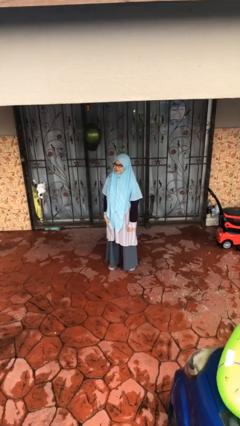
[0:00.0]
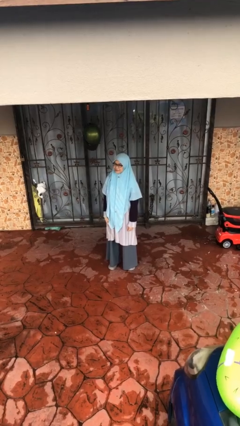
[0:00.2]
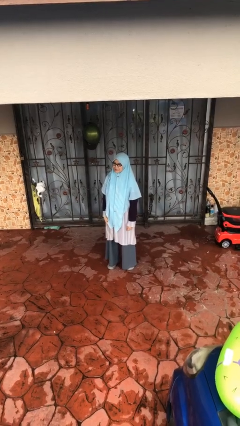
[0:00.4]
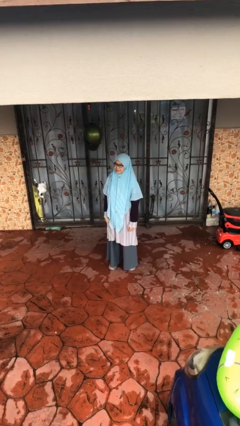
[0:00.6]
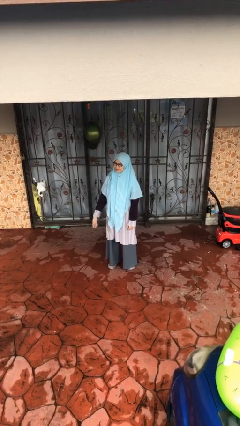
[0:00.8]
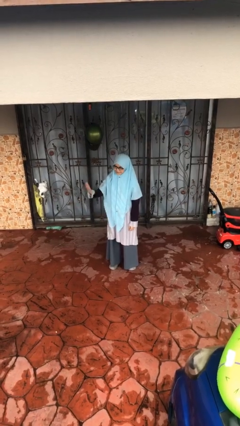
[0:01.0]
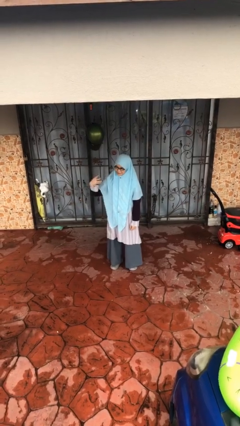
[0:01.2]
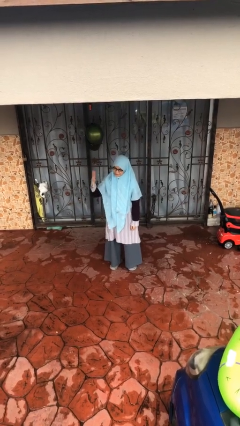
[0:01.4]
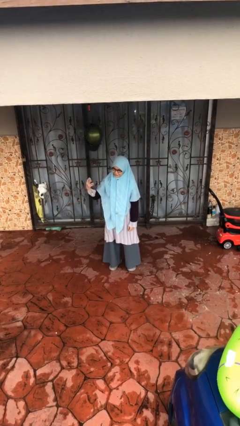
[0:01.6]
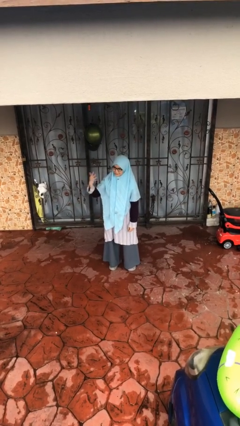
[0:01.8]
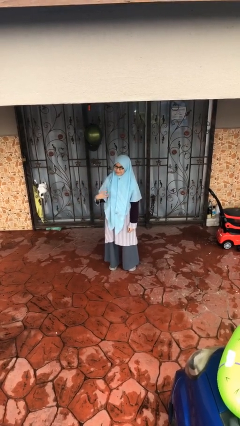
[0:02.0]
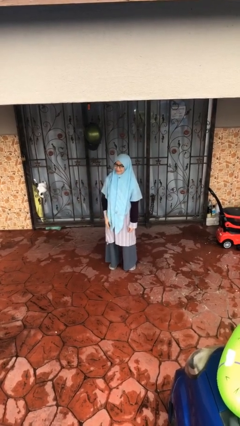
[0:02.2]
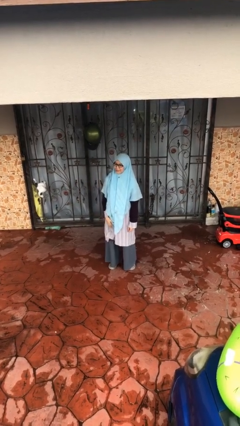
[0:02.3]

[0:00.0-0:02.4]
person gestures come here

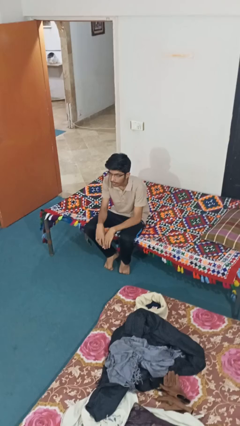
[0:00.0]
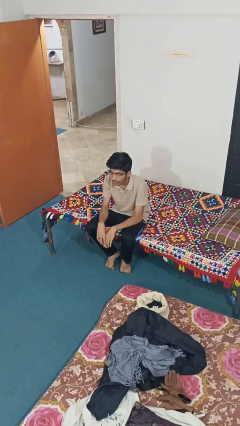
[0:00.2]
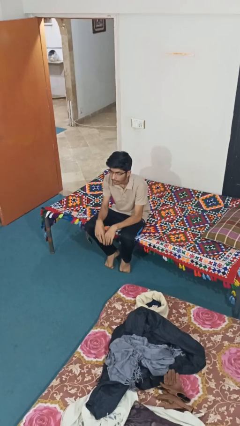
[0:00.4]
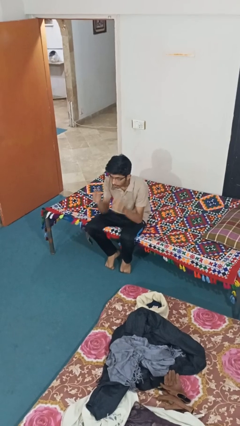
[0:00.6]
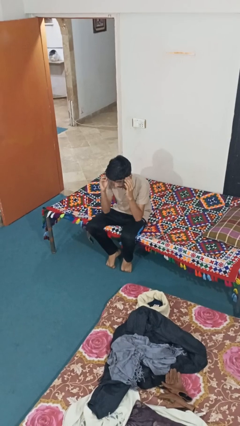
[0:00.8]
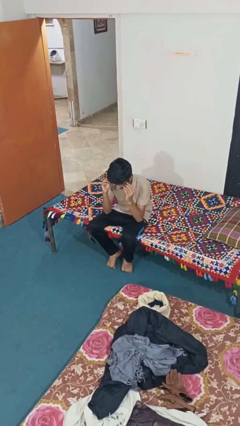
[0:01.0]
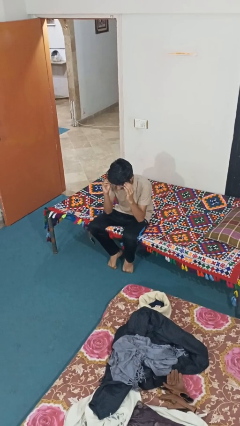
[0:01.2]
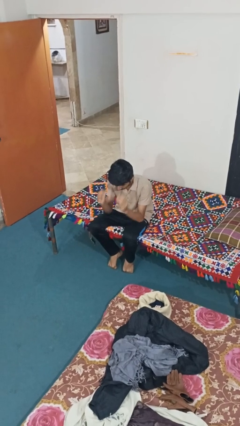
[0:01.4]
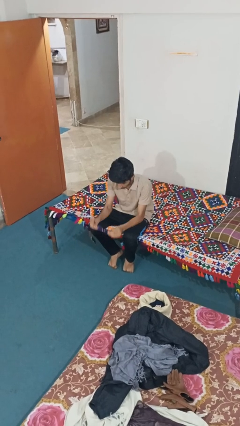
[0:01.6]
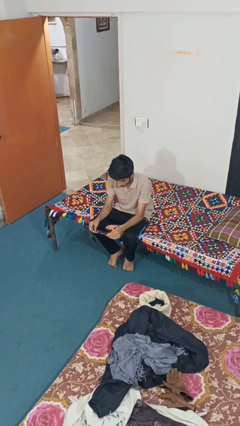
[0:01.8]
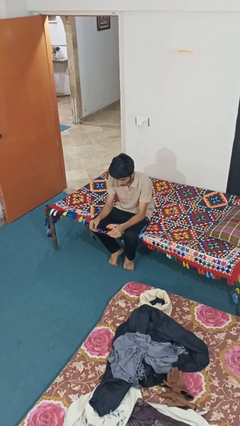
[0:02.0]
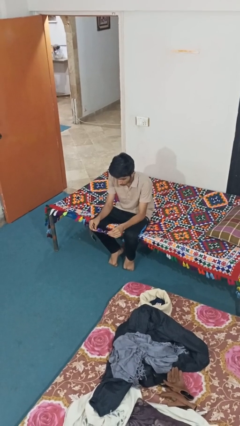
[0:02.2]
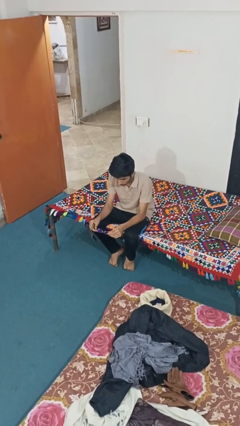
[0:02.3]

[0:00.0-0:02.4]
person takes off glasses

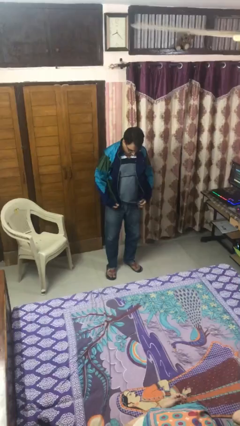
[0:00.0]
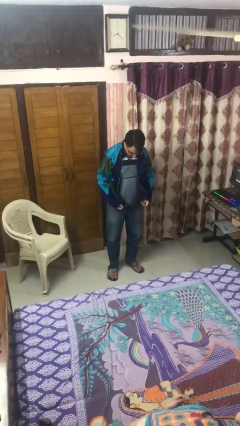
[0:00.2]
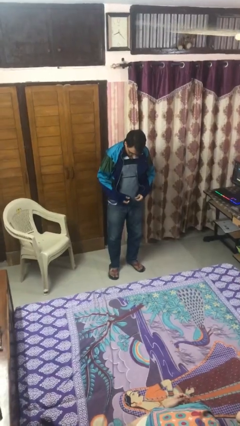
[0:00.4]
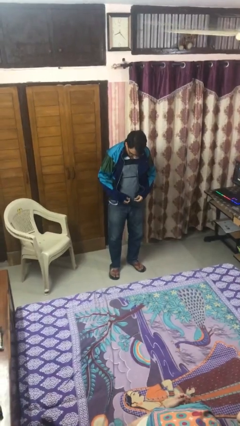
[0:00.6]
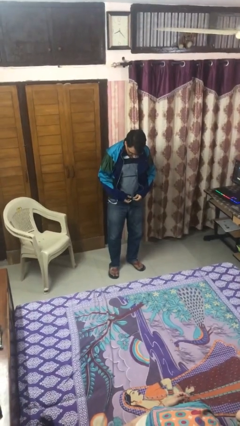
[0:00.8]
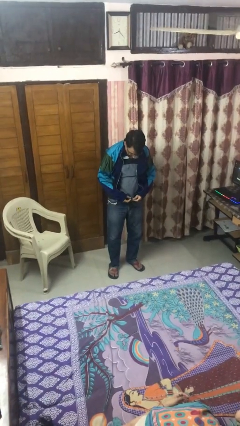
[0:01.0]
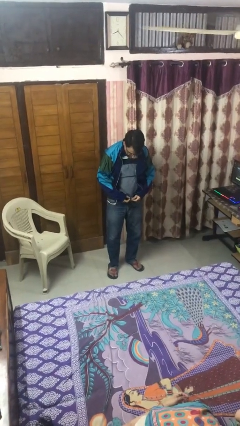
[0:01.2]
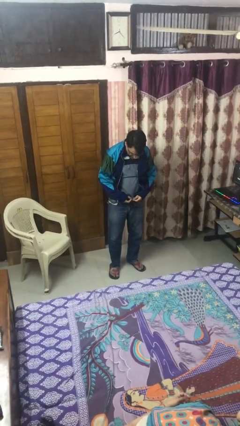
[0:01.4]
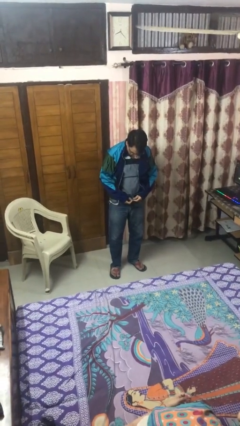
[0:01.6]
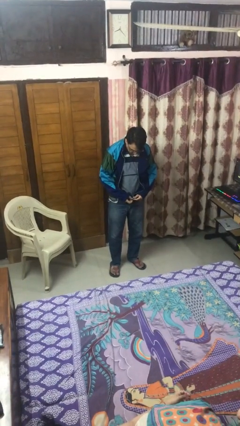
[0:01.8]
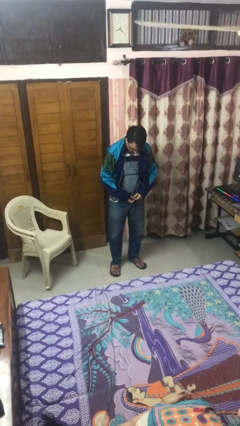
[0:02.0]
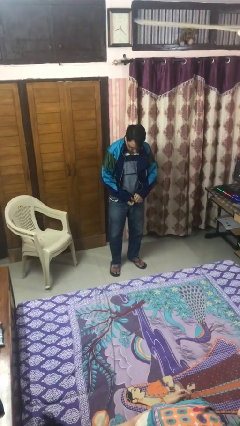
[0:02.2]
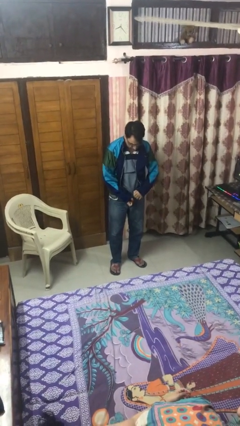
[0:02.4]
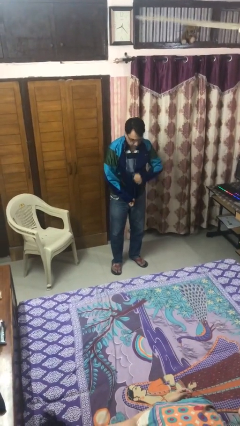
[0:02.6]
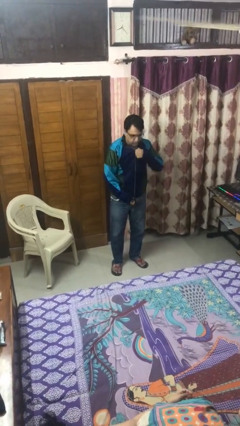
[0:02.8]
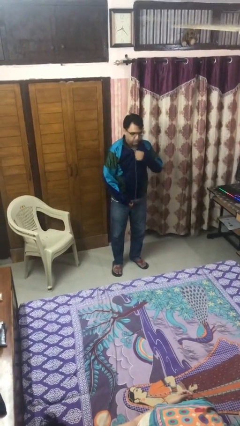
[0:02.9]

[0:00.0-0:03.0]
person zips up jacket

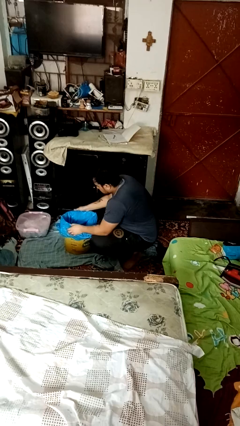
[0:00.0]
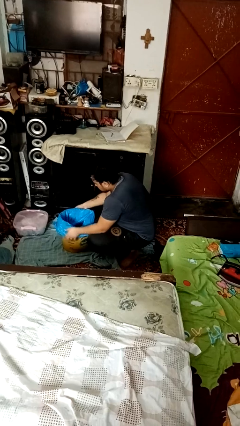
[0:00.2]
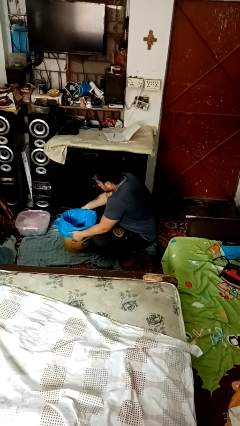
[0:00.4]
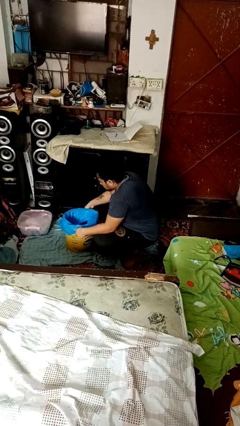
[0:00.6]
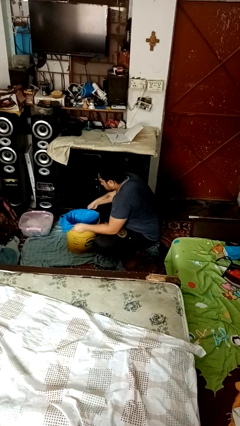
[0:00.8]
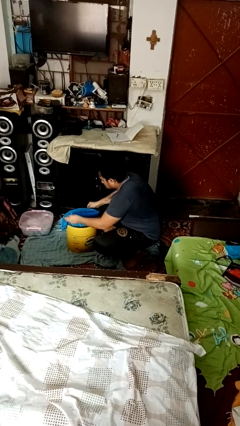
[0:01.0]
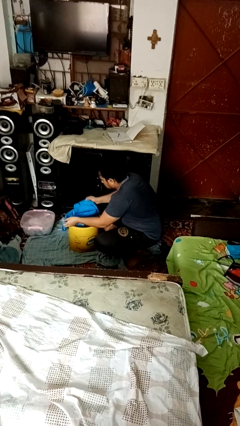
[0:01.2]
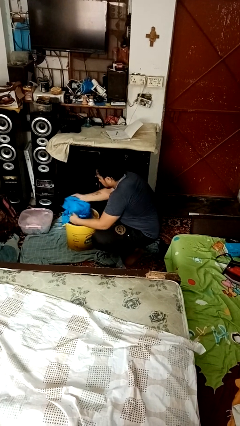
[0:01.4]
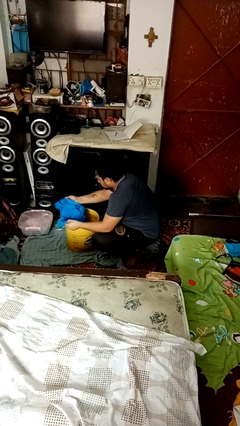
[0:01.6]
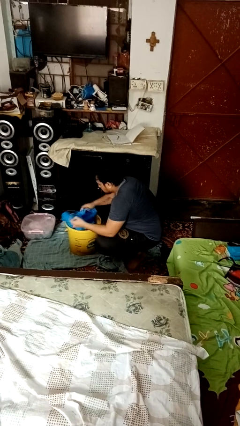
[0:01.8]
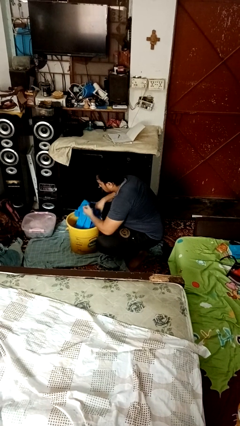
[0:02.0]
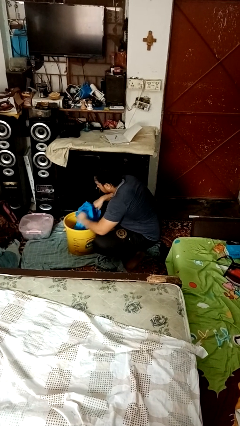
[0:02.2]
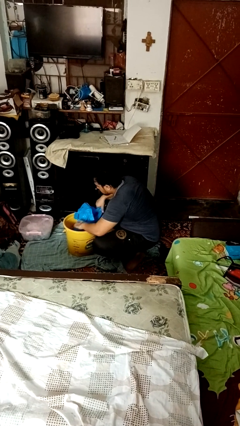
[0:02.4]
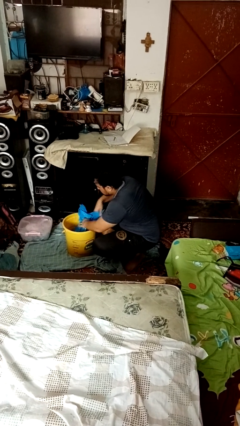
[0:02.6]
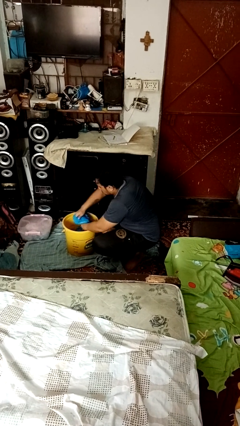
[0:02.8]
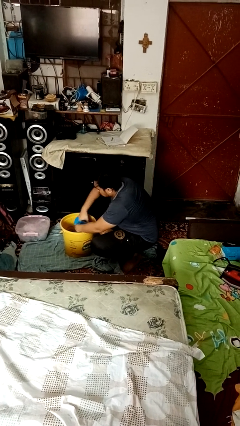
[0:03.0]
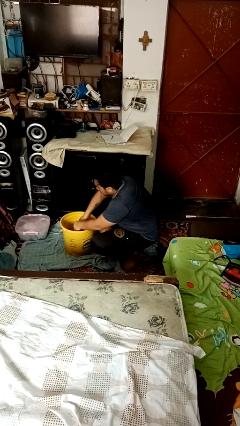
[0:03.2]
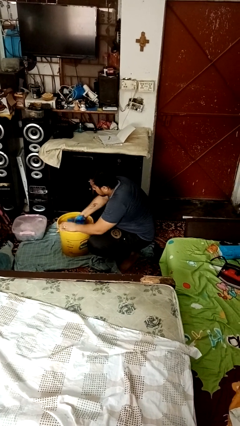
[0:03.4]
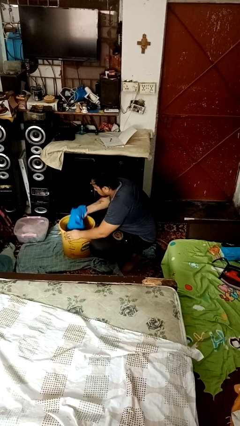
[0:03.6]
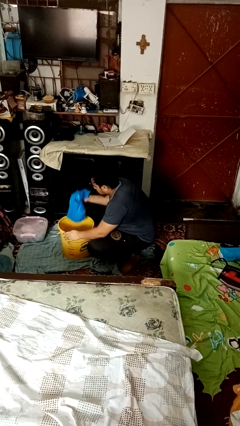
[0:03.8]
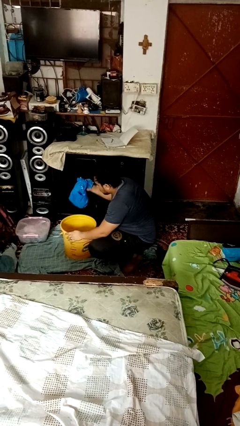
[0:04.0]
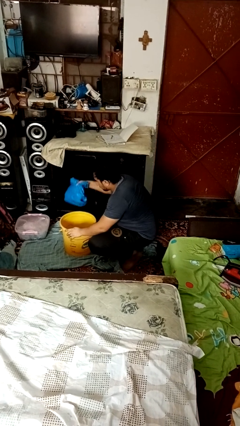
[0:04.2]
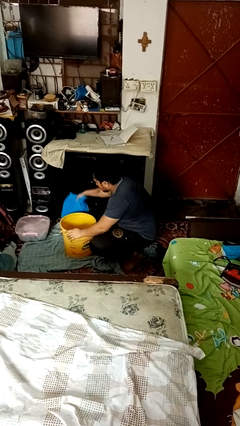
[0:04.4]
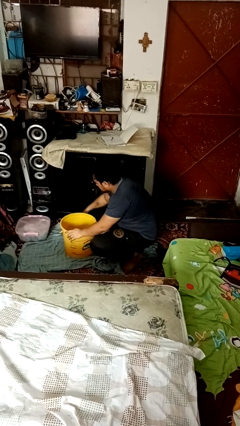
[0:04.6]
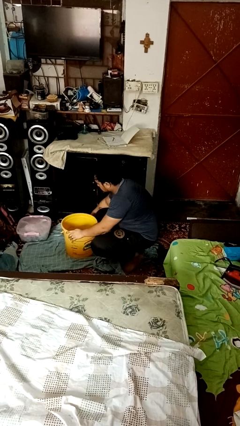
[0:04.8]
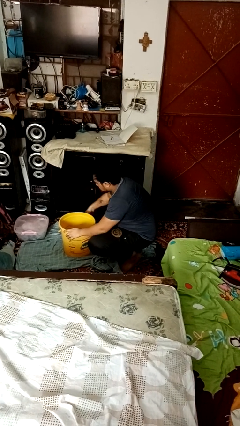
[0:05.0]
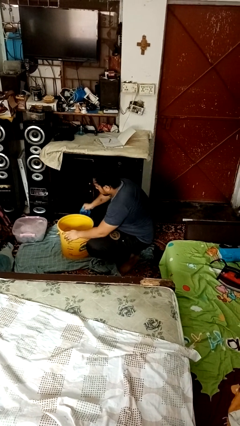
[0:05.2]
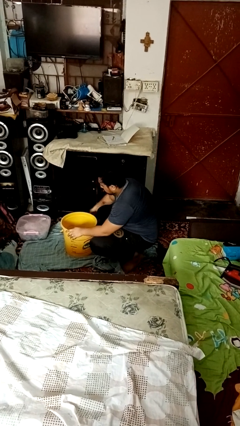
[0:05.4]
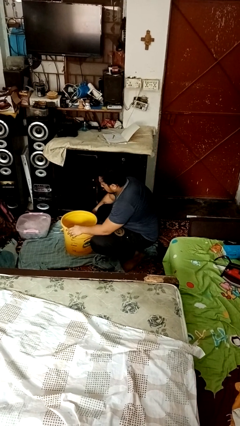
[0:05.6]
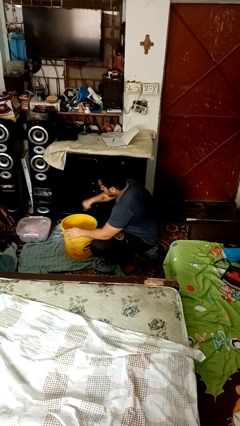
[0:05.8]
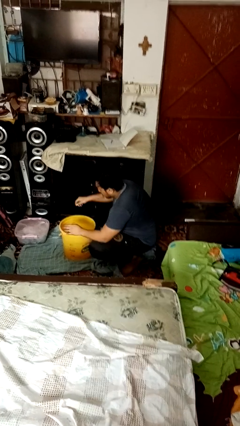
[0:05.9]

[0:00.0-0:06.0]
person removes trashbag from trashcan

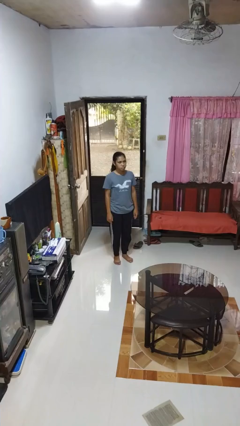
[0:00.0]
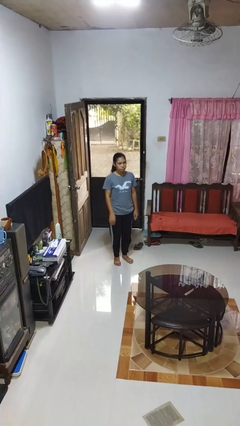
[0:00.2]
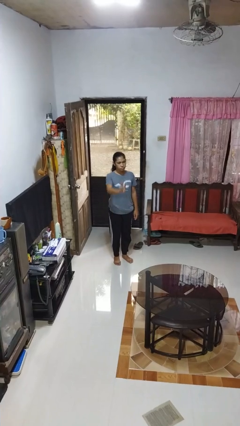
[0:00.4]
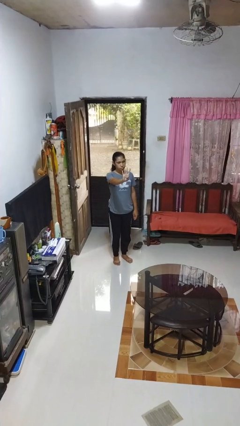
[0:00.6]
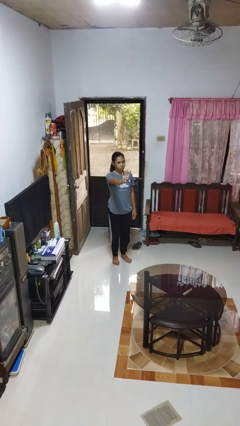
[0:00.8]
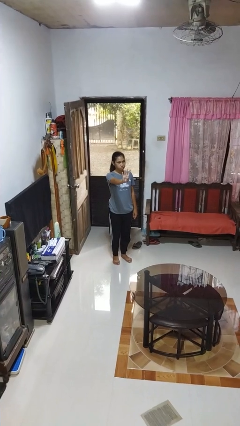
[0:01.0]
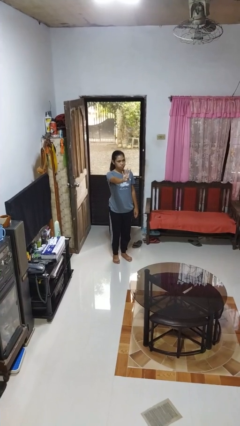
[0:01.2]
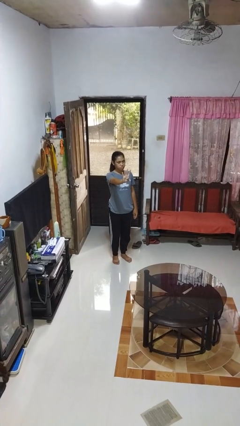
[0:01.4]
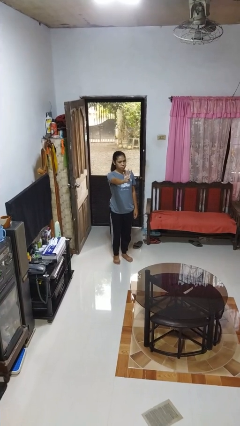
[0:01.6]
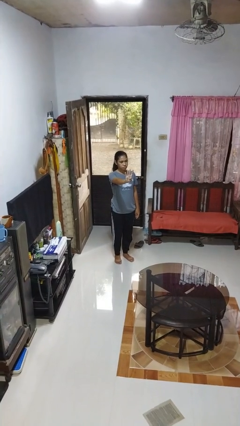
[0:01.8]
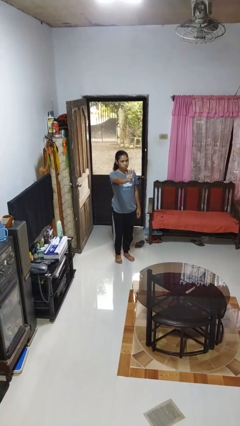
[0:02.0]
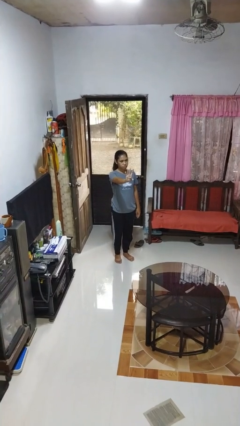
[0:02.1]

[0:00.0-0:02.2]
person gestures number four

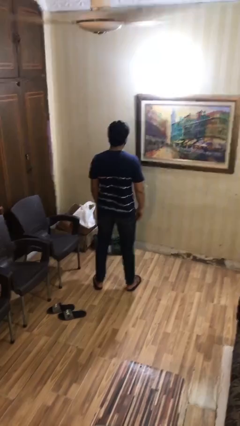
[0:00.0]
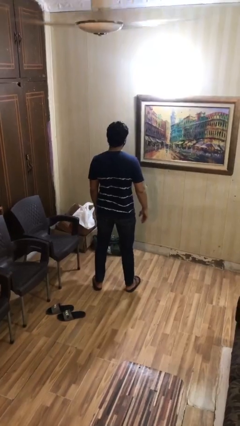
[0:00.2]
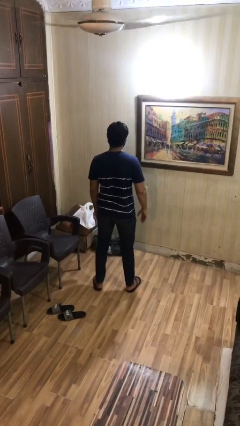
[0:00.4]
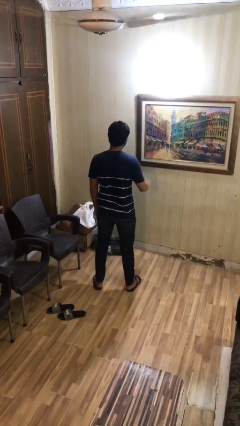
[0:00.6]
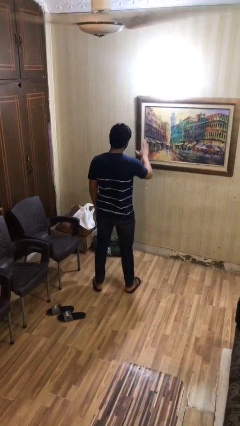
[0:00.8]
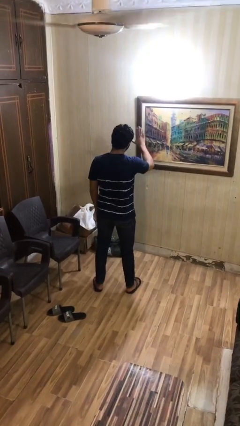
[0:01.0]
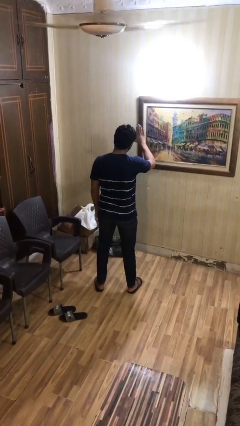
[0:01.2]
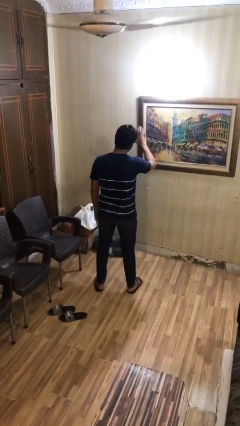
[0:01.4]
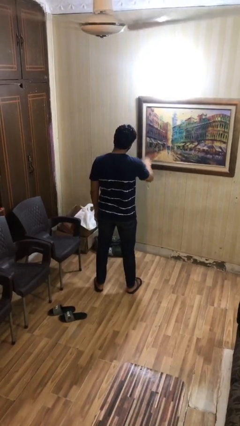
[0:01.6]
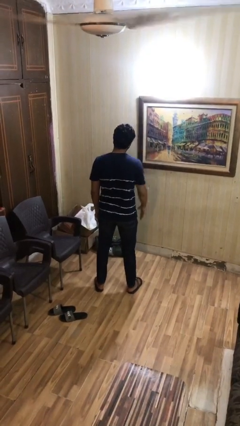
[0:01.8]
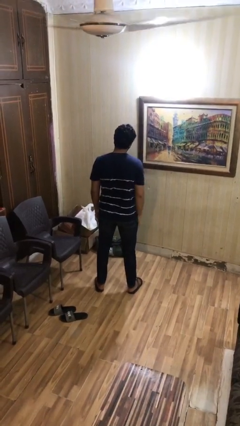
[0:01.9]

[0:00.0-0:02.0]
person gestures stop
